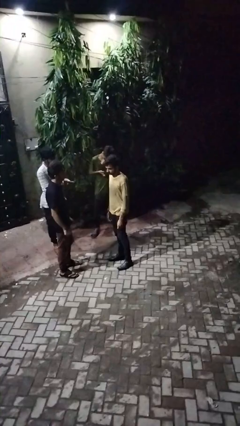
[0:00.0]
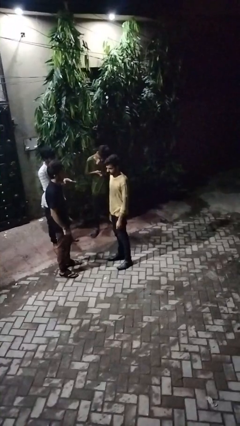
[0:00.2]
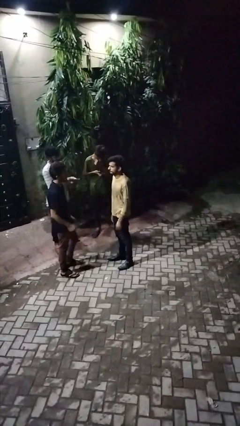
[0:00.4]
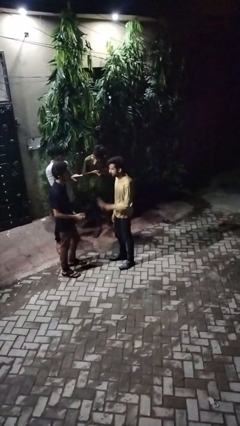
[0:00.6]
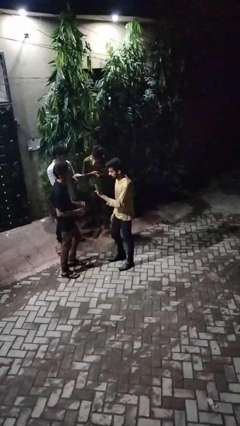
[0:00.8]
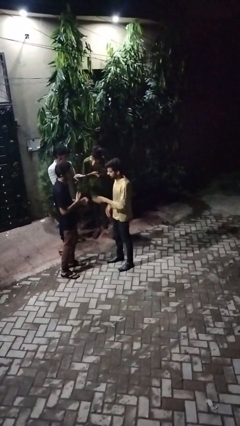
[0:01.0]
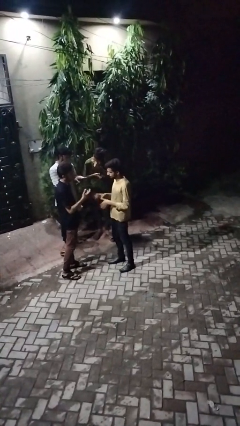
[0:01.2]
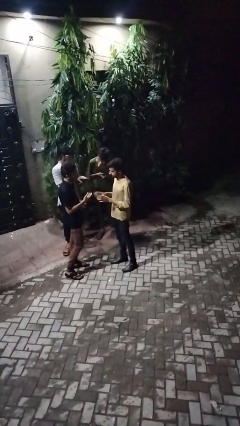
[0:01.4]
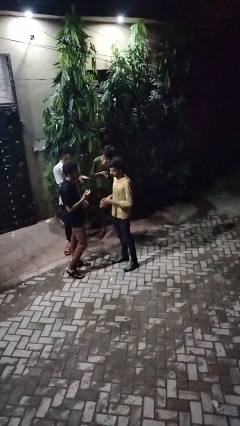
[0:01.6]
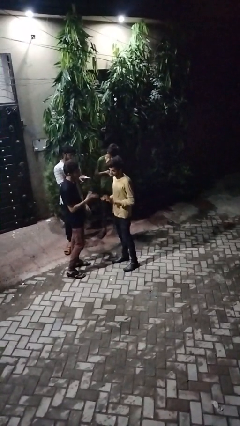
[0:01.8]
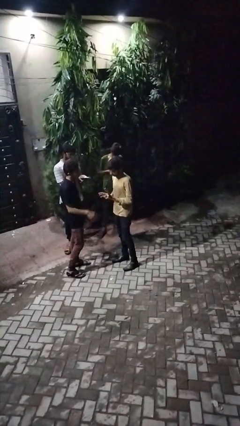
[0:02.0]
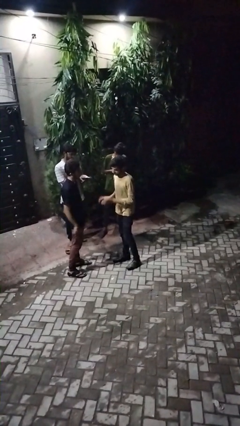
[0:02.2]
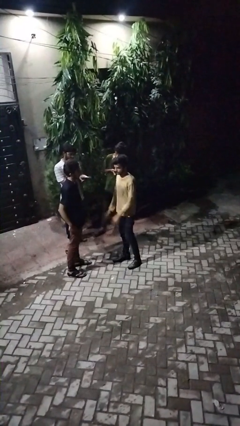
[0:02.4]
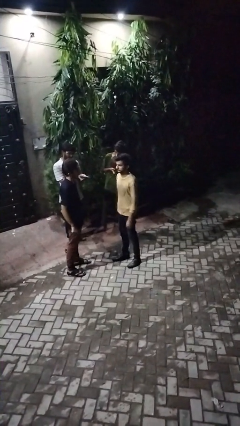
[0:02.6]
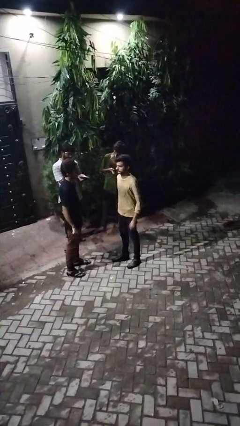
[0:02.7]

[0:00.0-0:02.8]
person talks to person

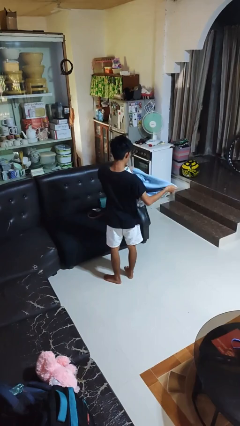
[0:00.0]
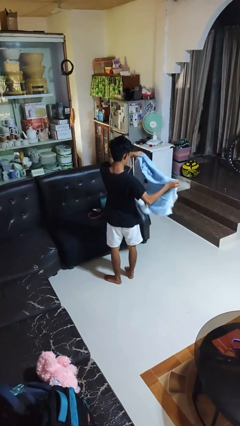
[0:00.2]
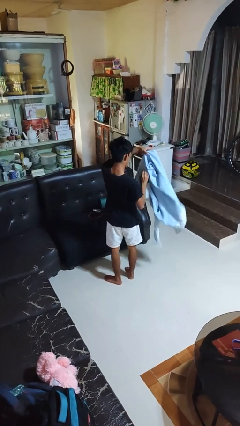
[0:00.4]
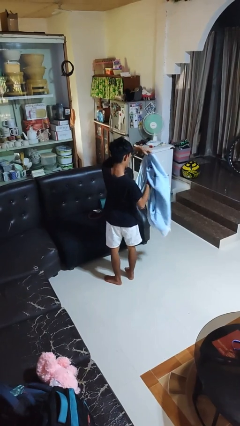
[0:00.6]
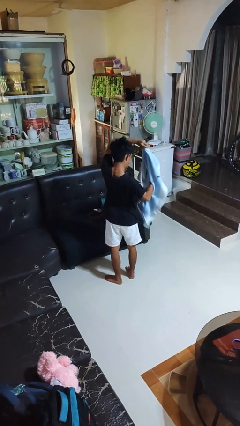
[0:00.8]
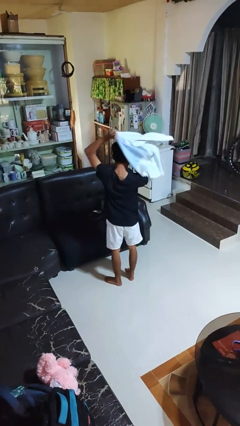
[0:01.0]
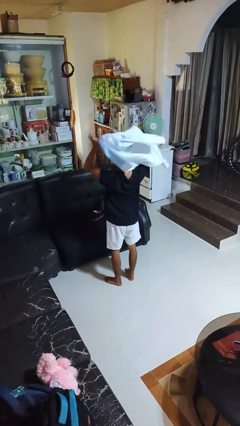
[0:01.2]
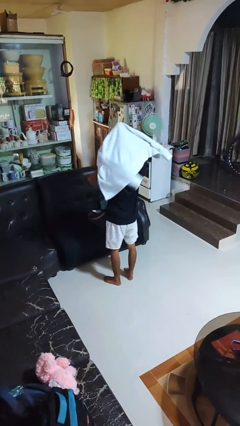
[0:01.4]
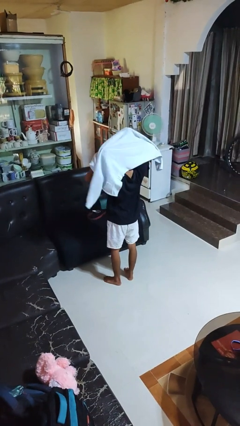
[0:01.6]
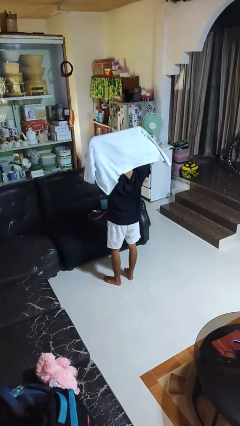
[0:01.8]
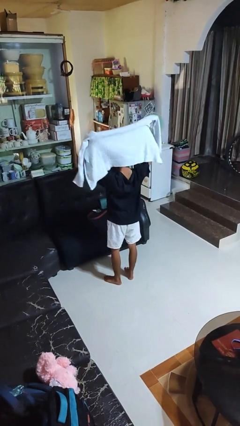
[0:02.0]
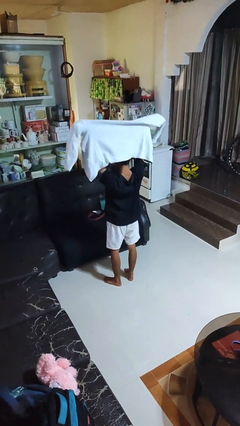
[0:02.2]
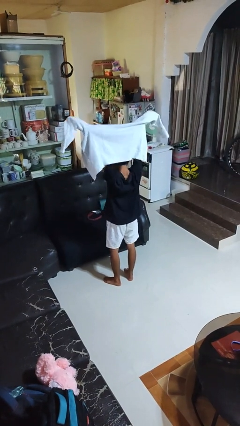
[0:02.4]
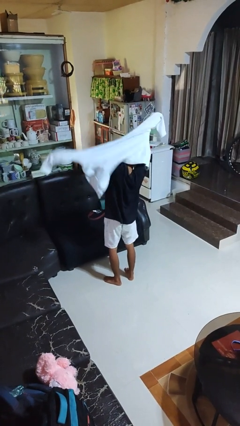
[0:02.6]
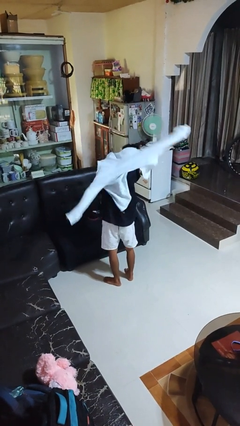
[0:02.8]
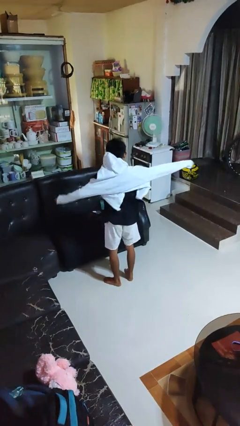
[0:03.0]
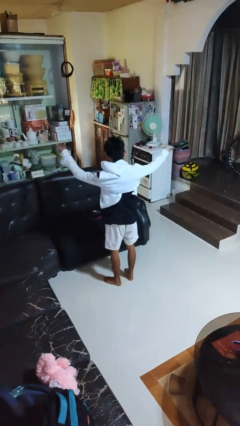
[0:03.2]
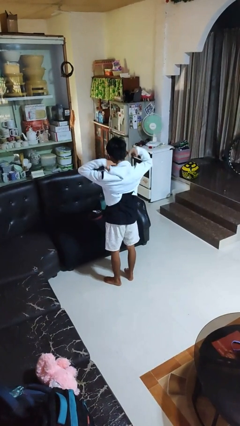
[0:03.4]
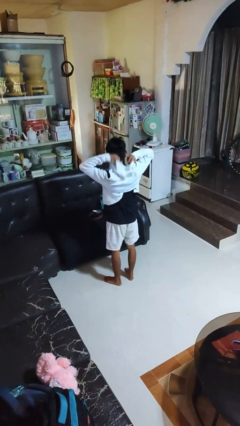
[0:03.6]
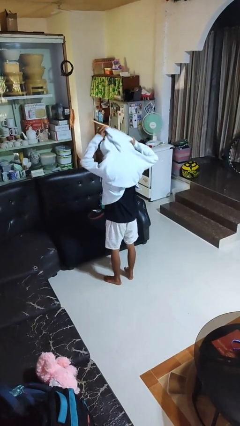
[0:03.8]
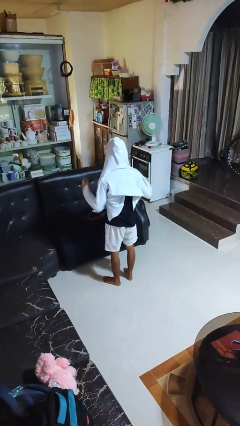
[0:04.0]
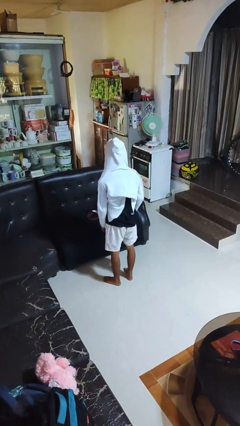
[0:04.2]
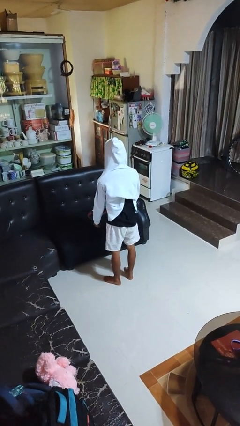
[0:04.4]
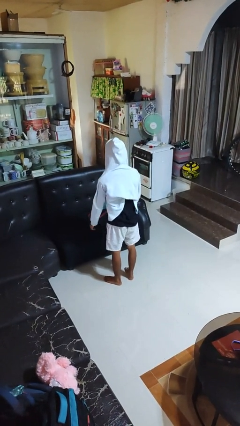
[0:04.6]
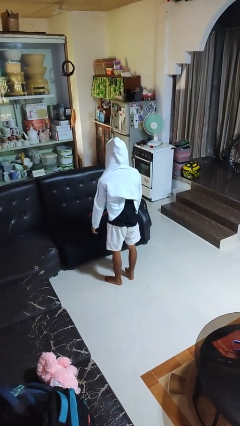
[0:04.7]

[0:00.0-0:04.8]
person puts on hoodie

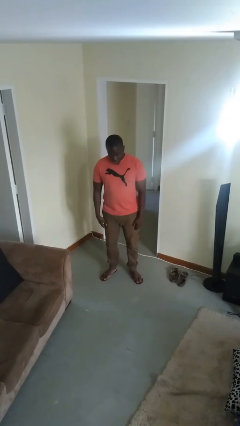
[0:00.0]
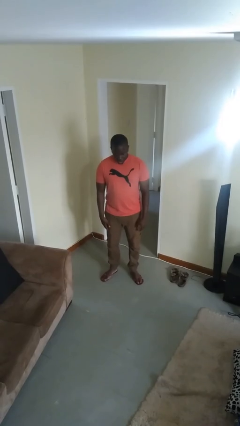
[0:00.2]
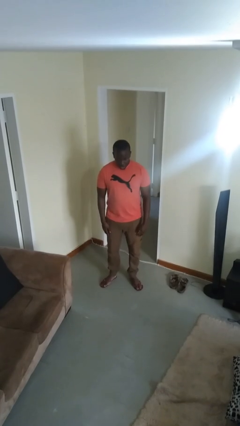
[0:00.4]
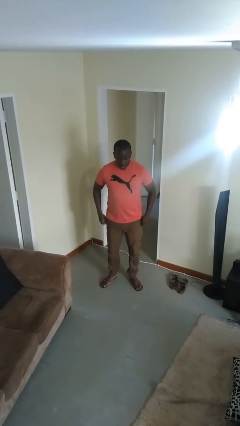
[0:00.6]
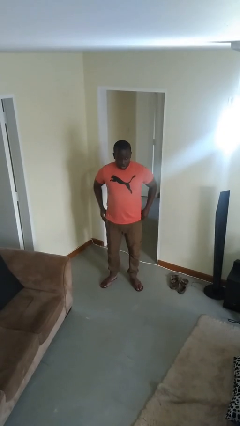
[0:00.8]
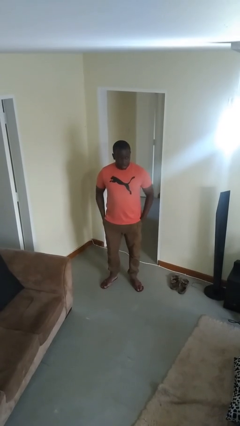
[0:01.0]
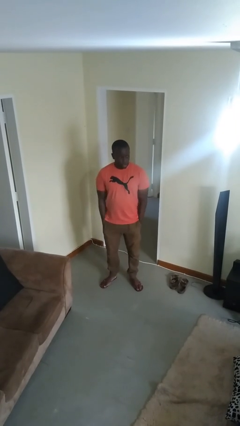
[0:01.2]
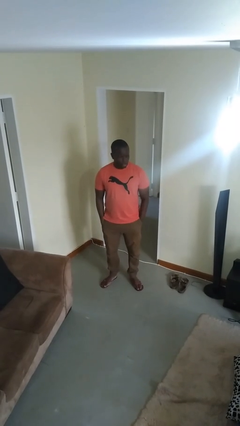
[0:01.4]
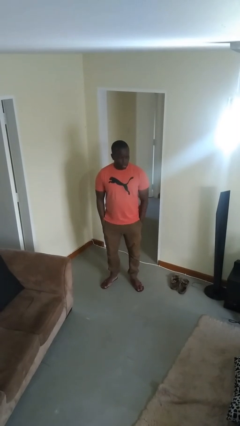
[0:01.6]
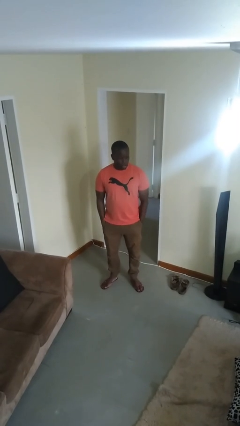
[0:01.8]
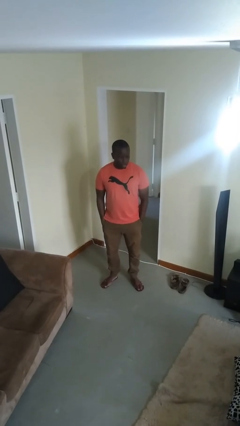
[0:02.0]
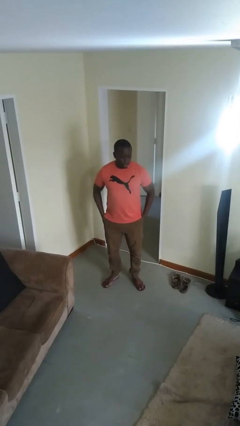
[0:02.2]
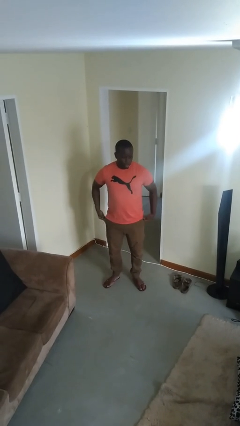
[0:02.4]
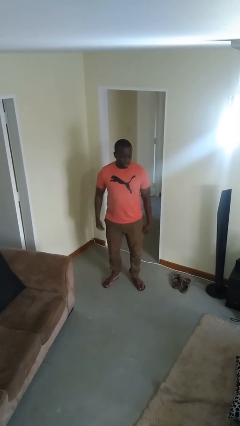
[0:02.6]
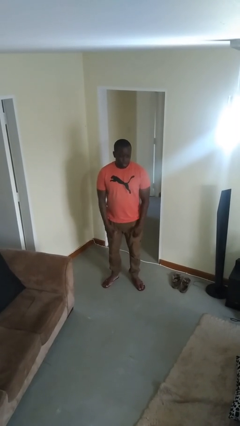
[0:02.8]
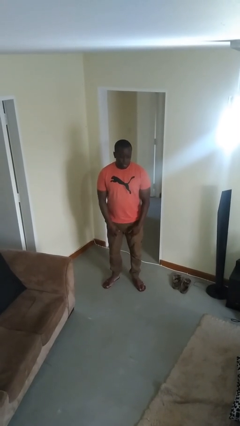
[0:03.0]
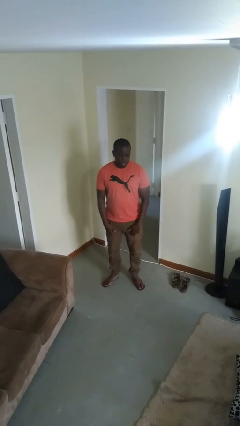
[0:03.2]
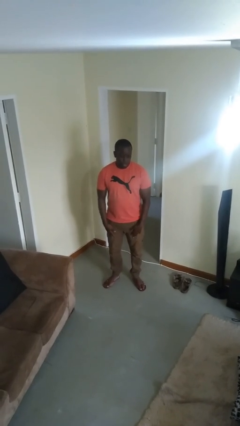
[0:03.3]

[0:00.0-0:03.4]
person puts hands in back pockets

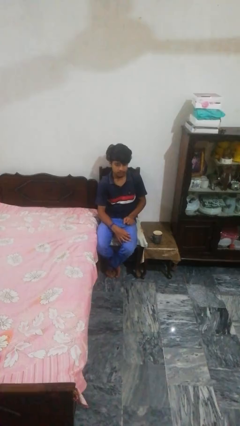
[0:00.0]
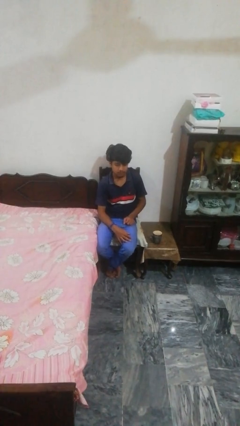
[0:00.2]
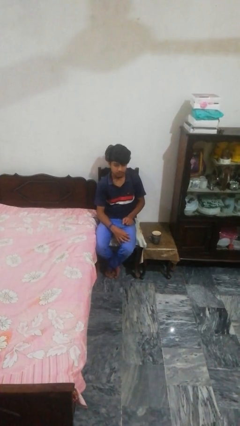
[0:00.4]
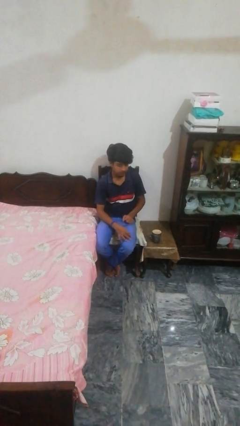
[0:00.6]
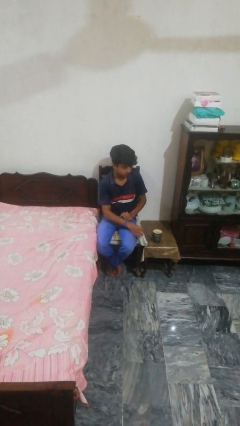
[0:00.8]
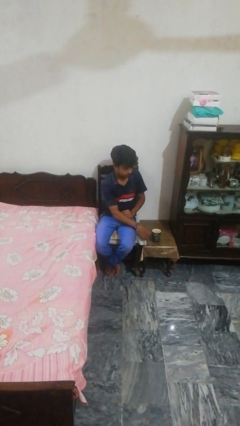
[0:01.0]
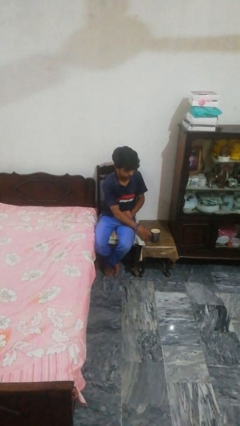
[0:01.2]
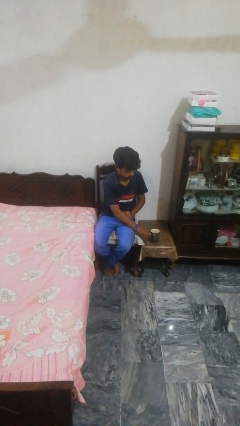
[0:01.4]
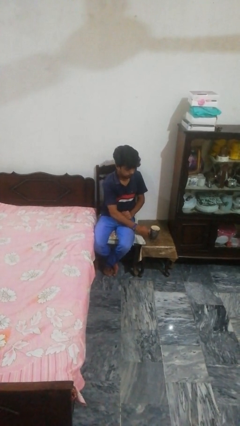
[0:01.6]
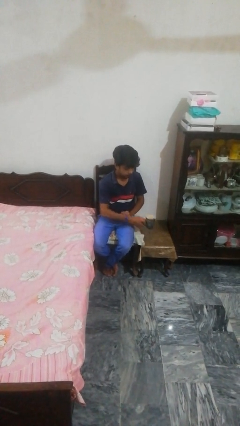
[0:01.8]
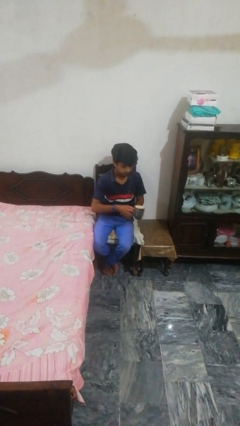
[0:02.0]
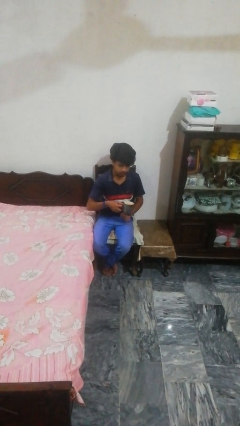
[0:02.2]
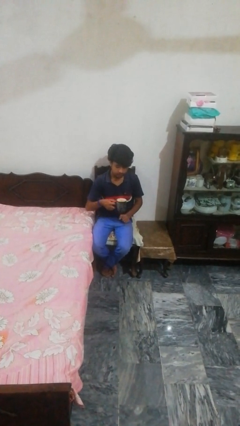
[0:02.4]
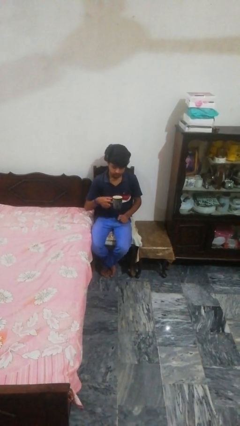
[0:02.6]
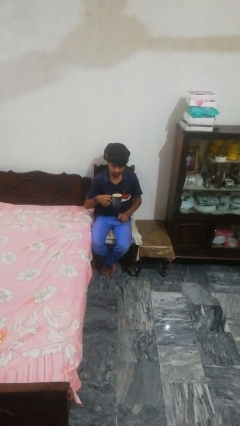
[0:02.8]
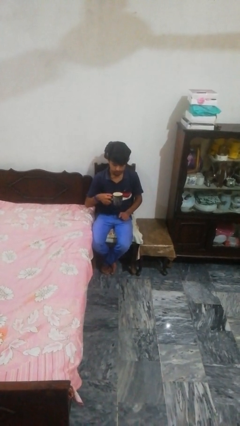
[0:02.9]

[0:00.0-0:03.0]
person picks up object from table

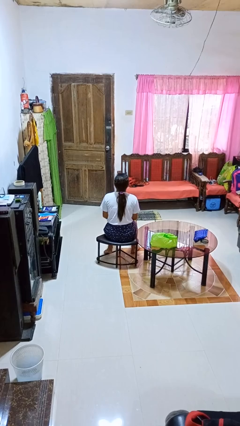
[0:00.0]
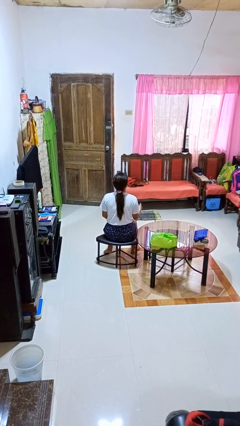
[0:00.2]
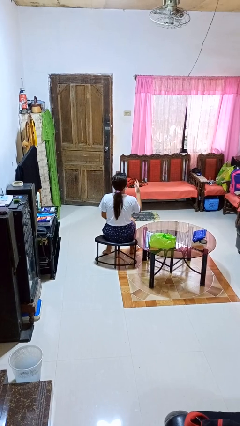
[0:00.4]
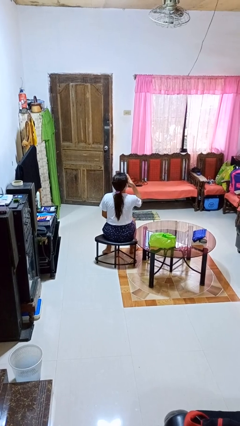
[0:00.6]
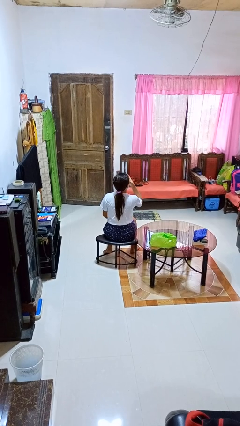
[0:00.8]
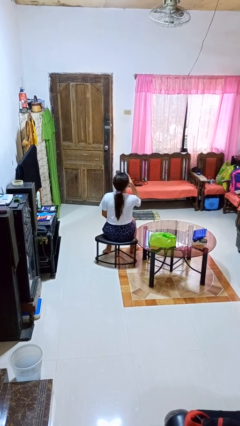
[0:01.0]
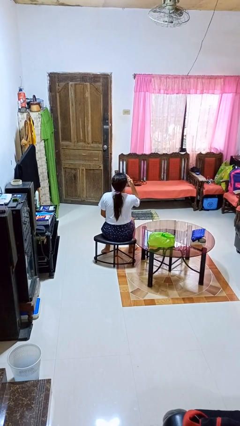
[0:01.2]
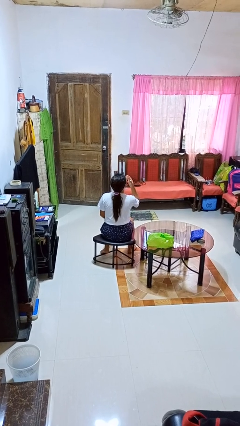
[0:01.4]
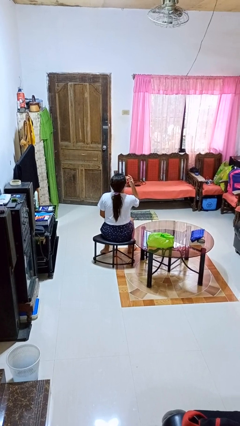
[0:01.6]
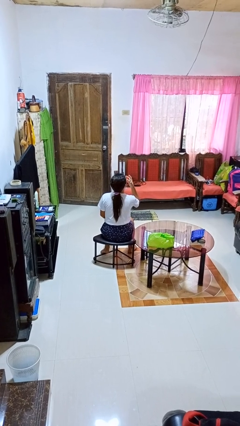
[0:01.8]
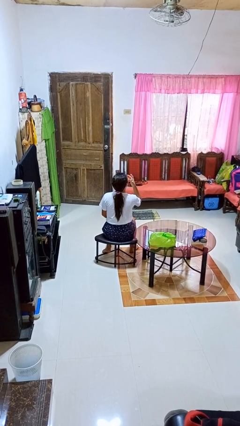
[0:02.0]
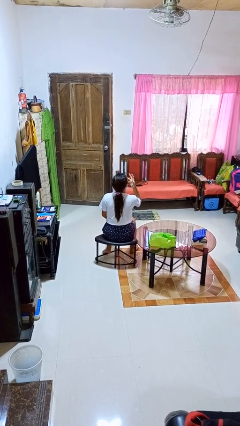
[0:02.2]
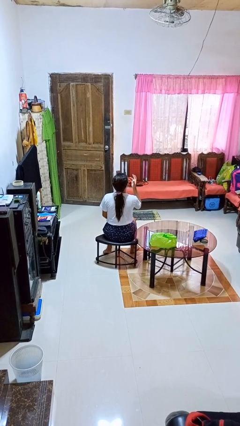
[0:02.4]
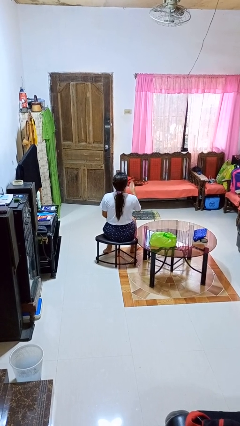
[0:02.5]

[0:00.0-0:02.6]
person licks fingers

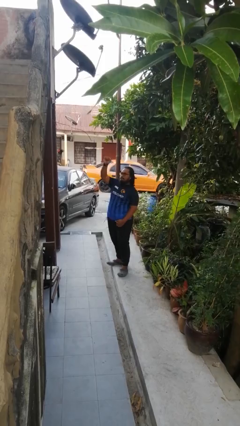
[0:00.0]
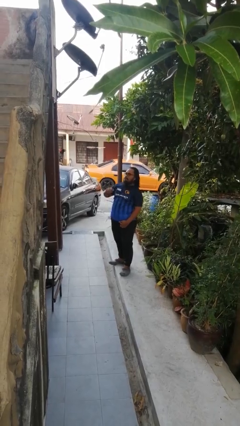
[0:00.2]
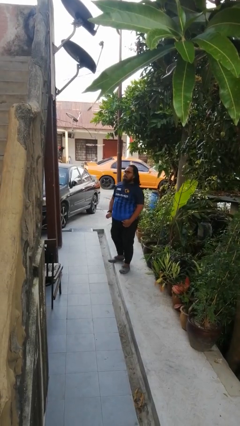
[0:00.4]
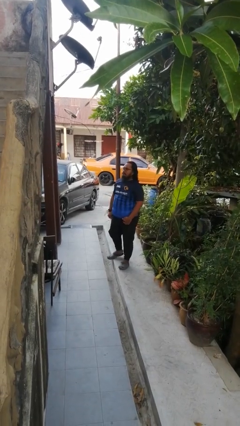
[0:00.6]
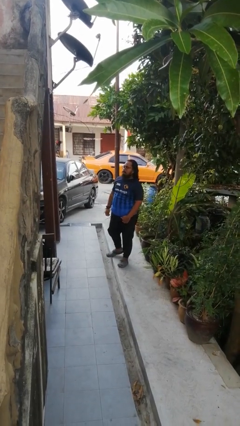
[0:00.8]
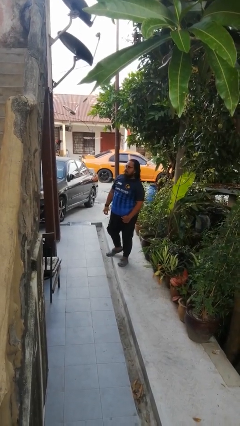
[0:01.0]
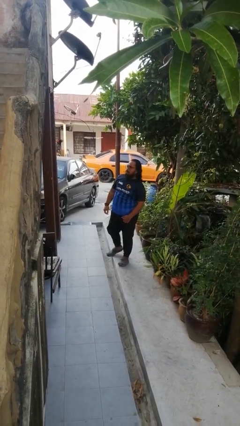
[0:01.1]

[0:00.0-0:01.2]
person gestures lower hand
